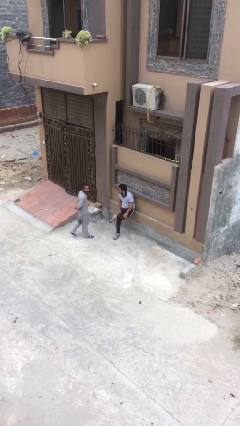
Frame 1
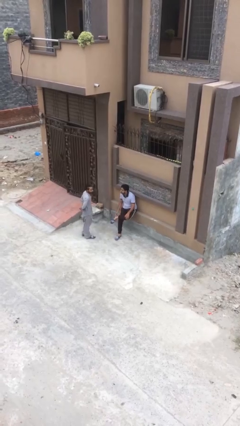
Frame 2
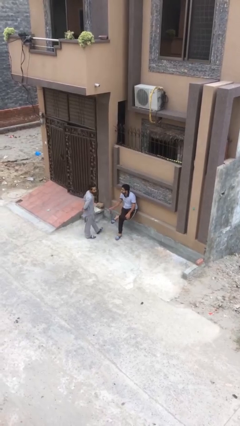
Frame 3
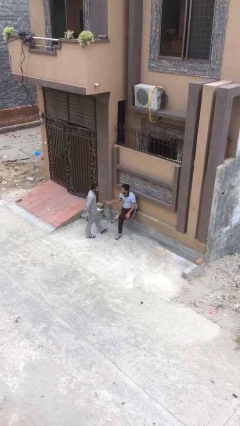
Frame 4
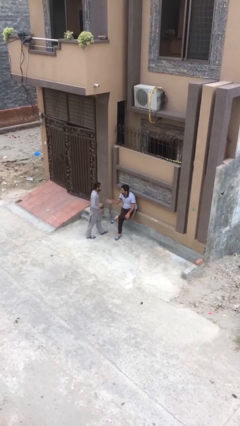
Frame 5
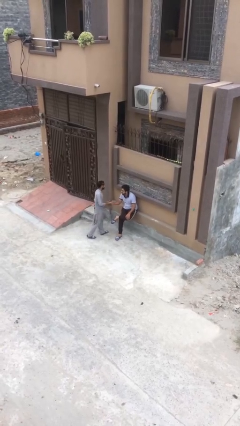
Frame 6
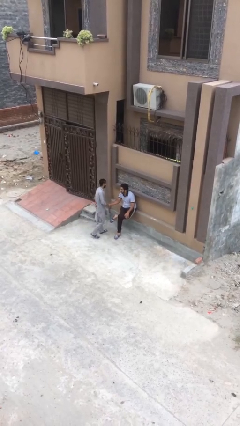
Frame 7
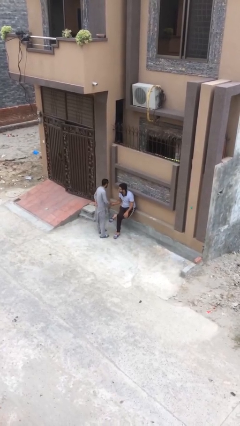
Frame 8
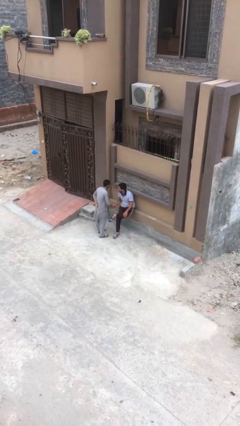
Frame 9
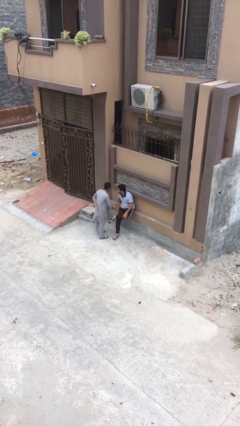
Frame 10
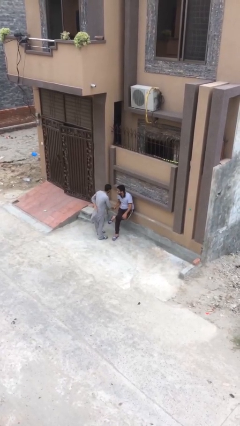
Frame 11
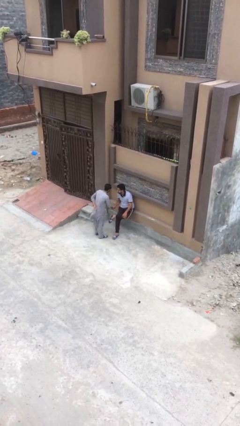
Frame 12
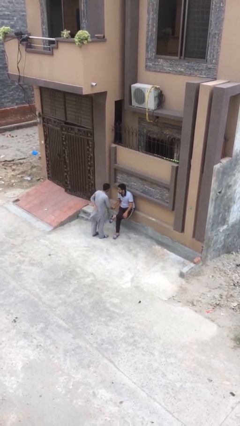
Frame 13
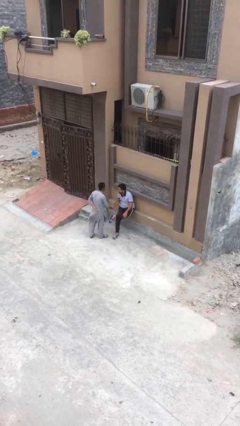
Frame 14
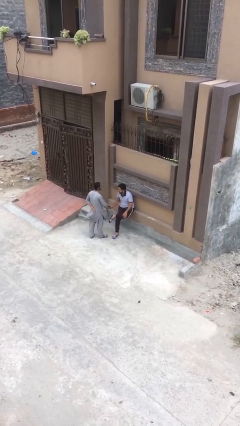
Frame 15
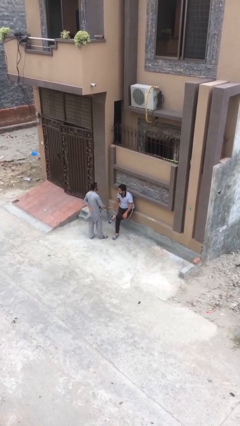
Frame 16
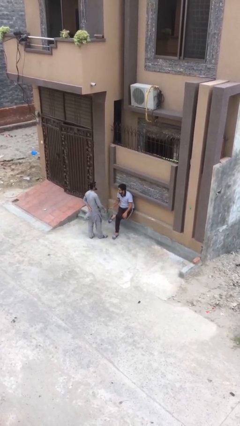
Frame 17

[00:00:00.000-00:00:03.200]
person shakes hand

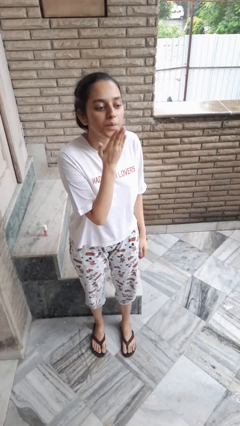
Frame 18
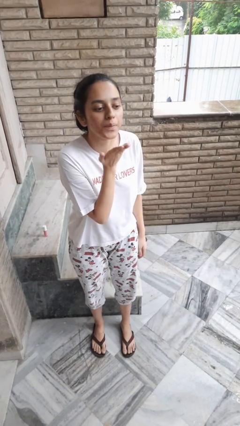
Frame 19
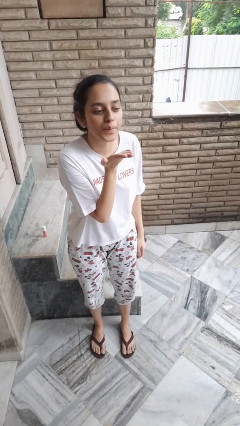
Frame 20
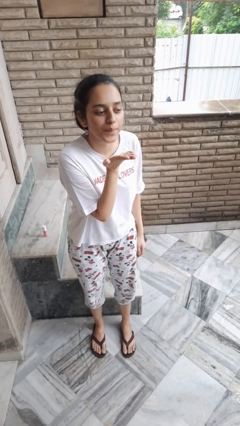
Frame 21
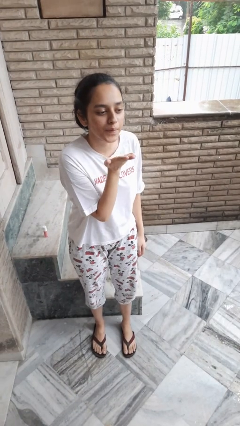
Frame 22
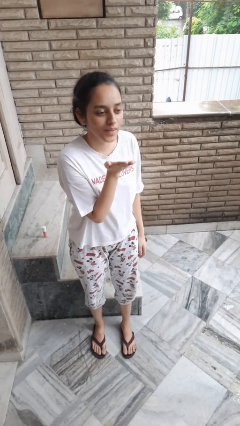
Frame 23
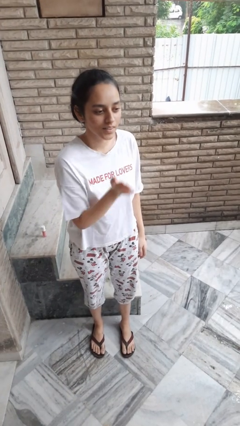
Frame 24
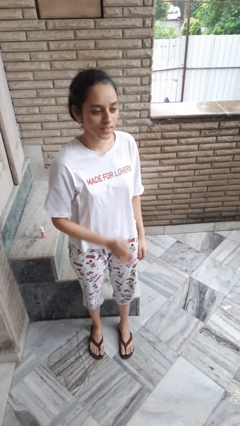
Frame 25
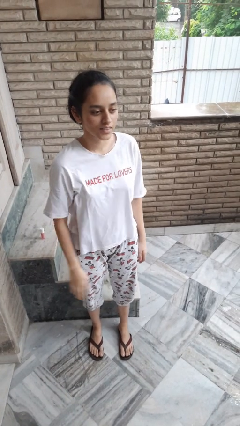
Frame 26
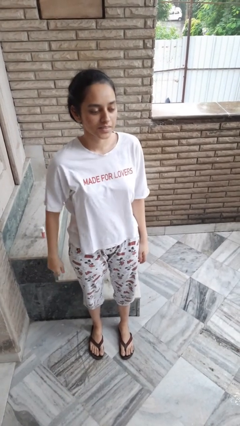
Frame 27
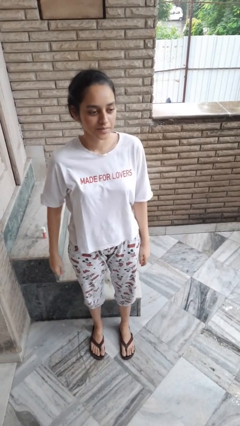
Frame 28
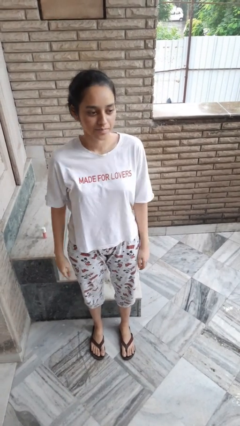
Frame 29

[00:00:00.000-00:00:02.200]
person gestures blow kiss

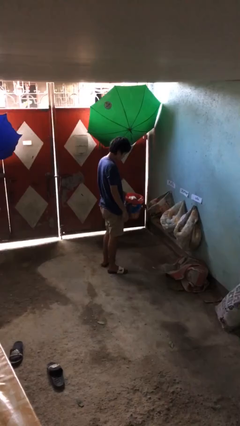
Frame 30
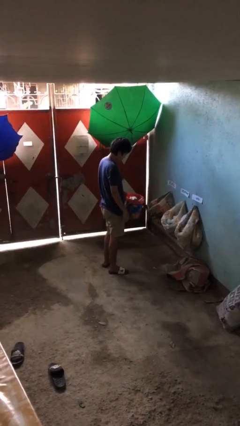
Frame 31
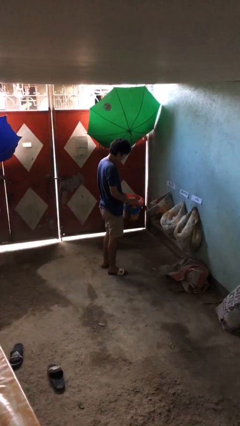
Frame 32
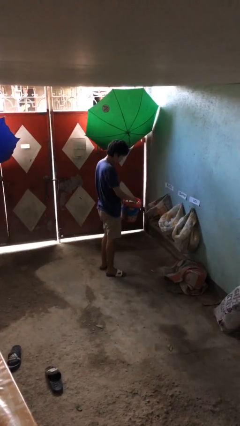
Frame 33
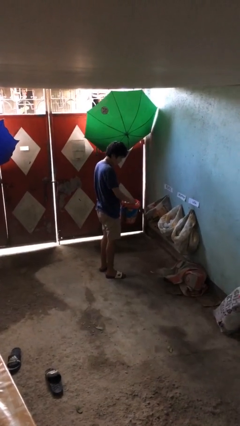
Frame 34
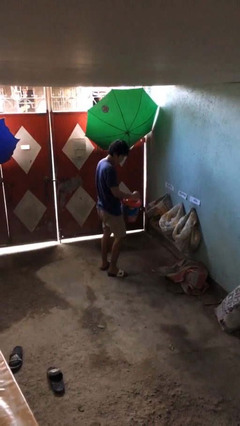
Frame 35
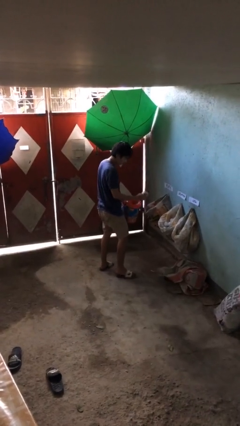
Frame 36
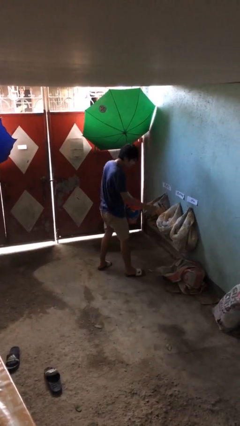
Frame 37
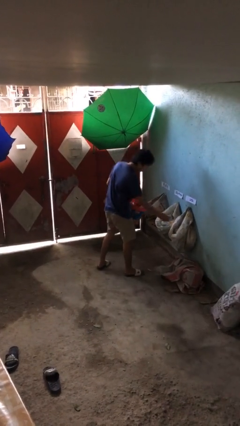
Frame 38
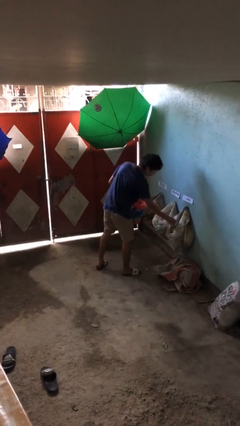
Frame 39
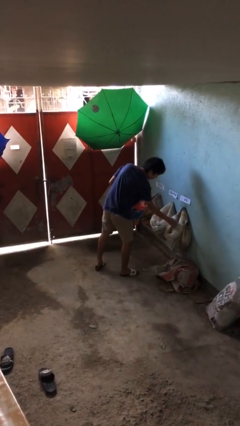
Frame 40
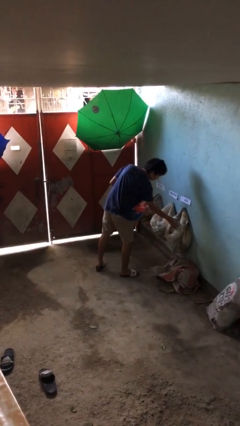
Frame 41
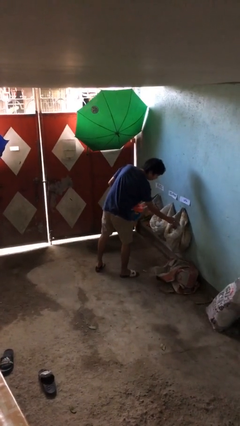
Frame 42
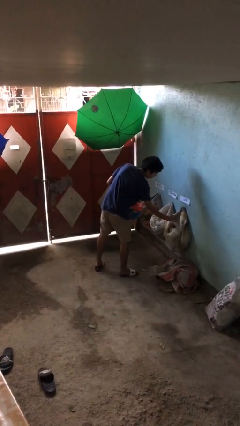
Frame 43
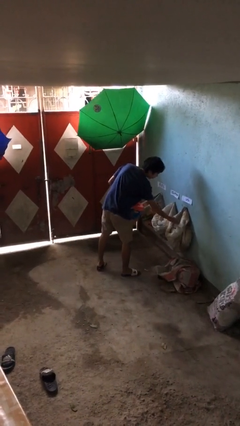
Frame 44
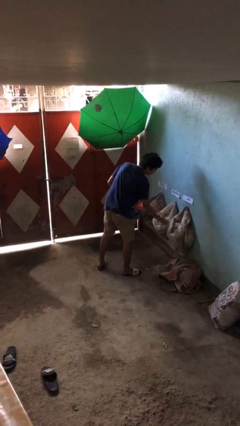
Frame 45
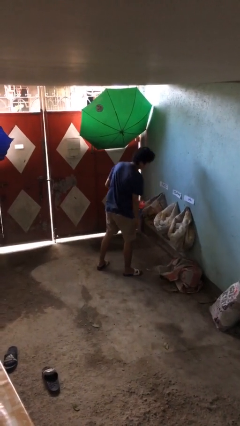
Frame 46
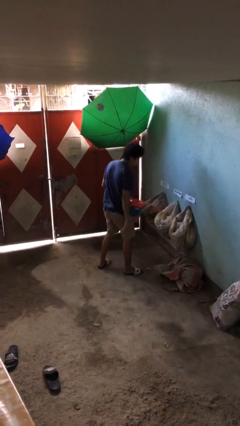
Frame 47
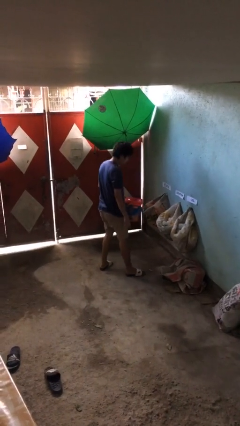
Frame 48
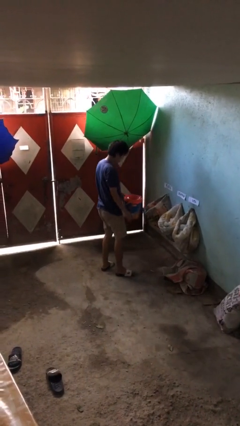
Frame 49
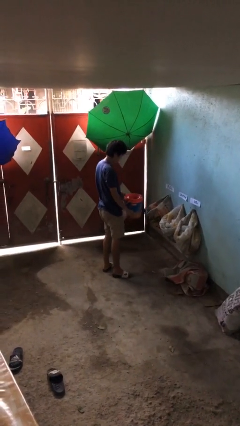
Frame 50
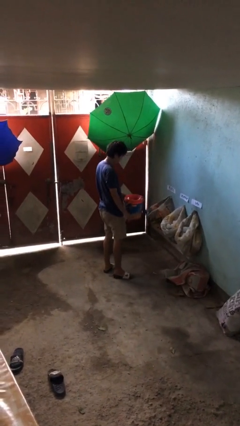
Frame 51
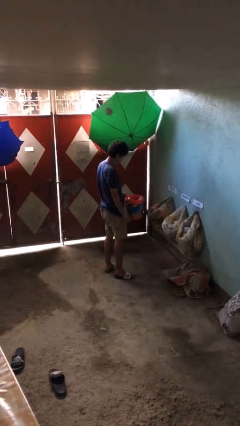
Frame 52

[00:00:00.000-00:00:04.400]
person discards trash

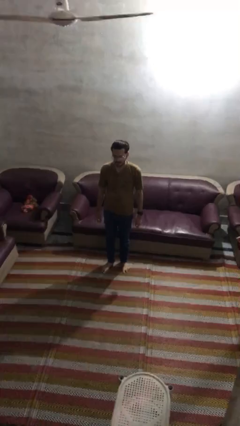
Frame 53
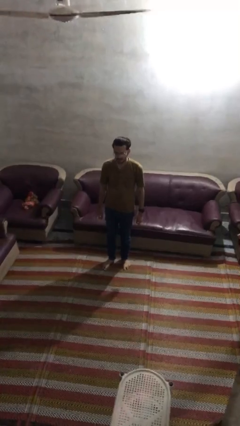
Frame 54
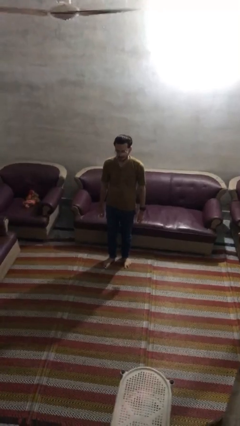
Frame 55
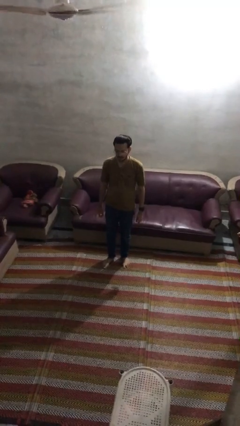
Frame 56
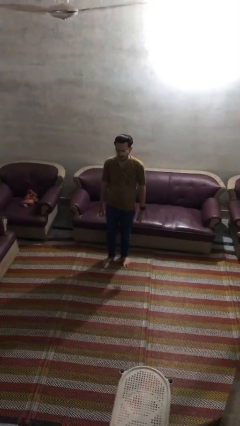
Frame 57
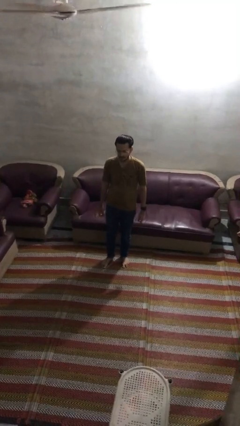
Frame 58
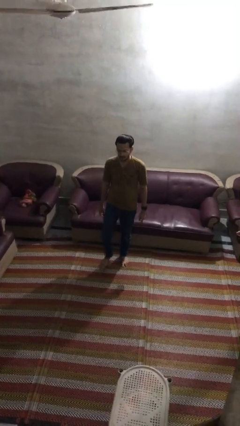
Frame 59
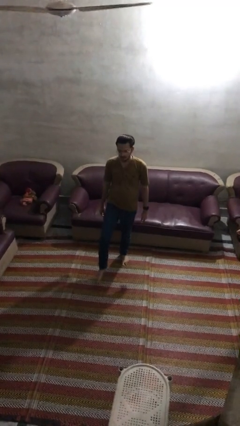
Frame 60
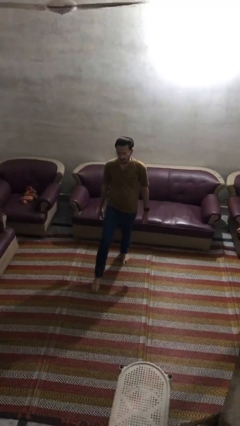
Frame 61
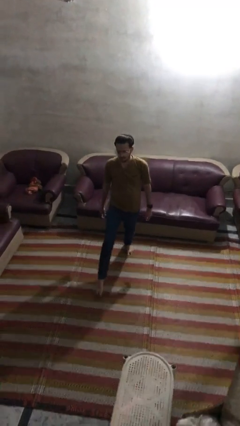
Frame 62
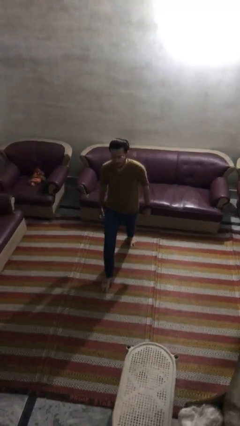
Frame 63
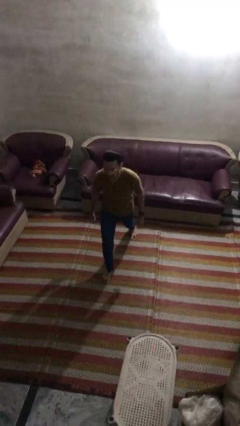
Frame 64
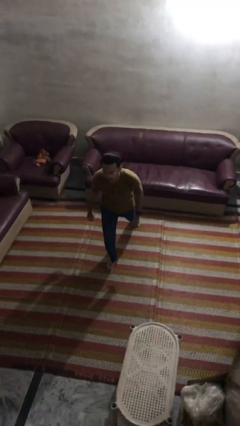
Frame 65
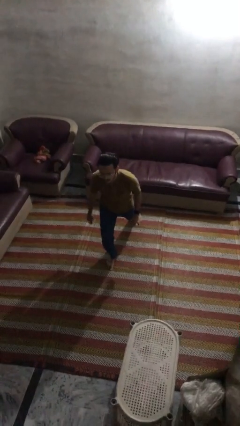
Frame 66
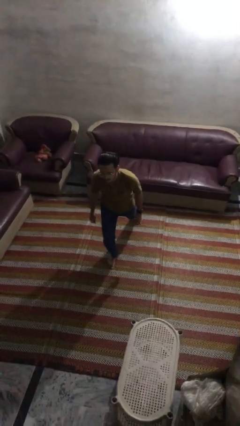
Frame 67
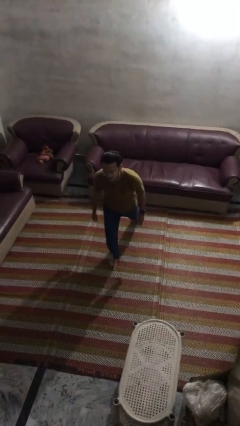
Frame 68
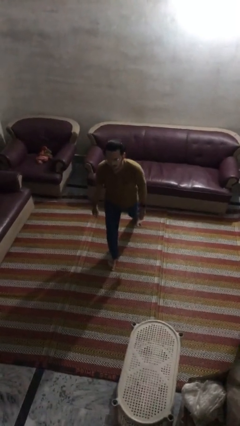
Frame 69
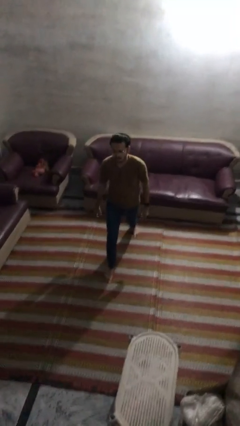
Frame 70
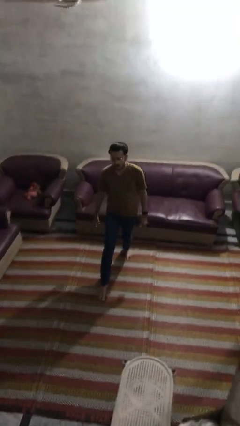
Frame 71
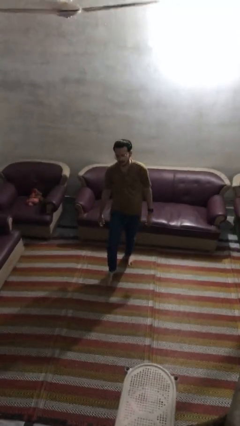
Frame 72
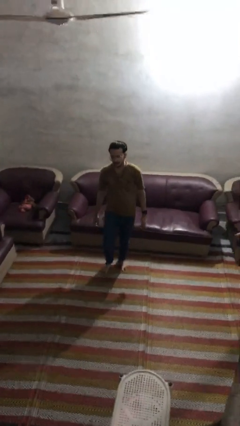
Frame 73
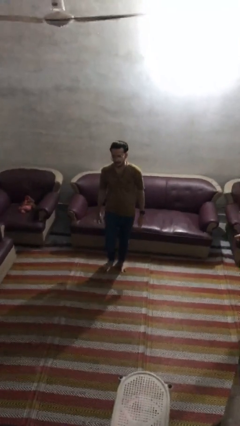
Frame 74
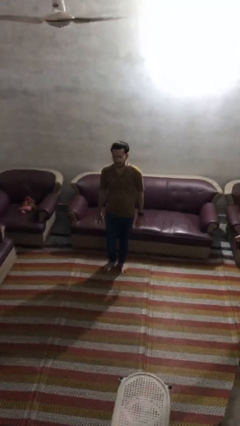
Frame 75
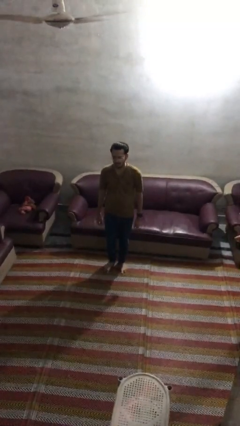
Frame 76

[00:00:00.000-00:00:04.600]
person exercises with lunges

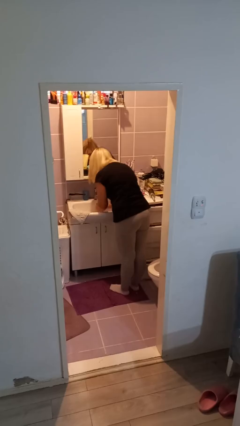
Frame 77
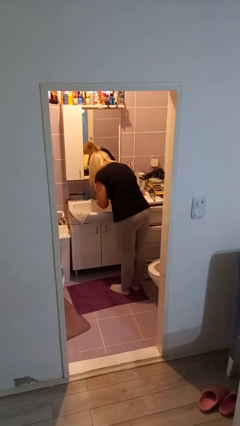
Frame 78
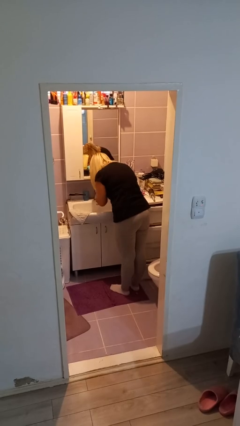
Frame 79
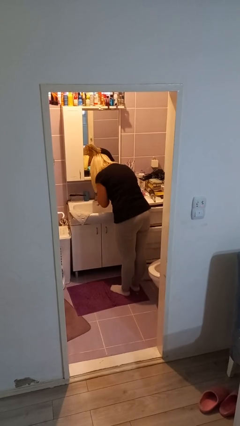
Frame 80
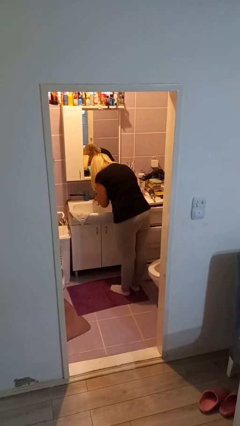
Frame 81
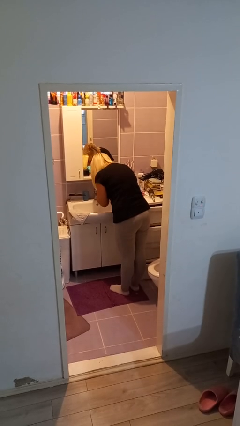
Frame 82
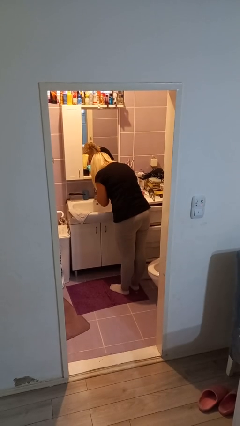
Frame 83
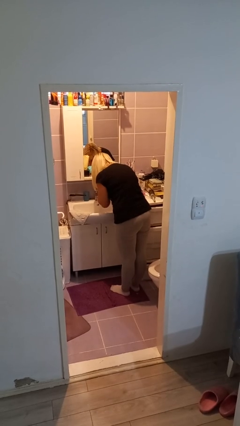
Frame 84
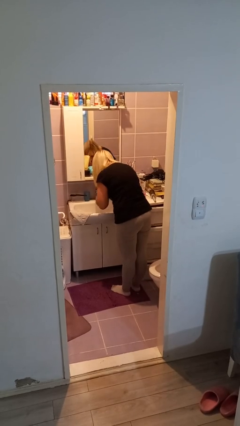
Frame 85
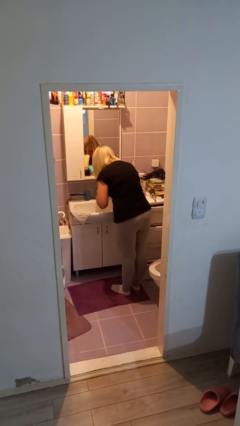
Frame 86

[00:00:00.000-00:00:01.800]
person washes face

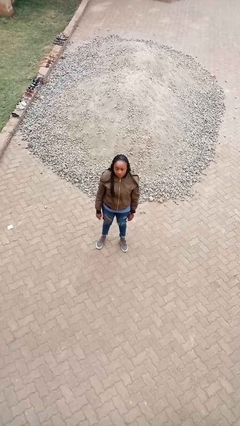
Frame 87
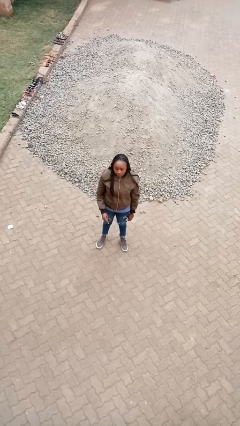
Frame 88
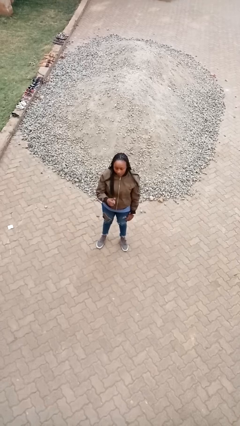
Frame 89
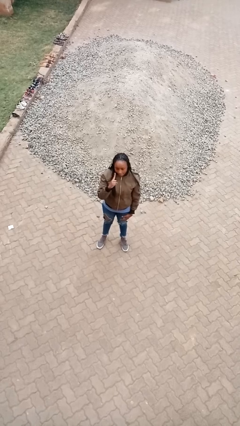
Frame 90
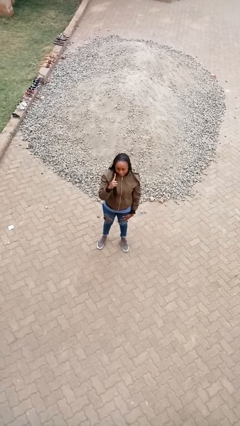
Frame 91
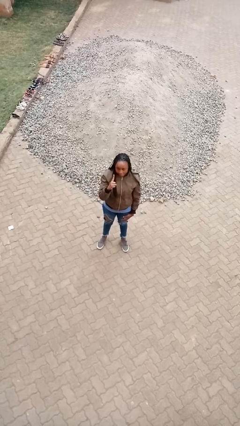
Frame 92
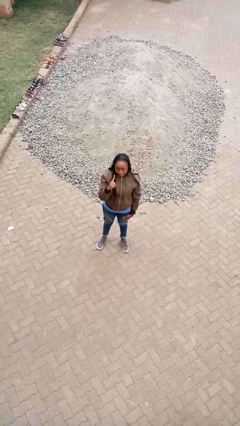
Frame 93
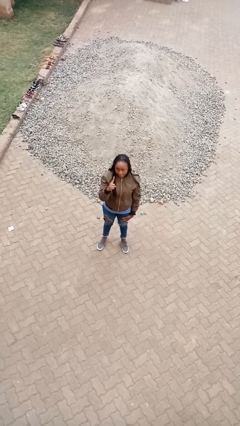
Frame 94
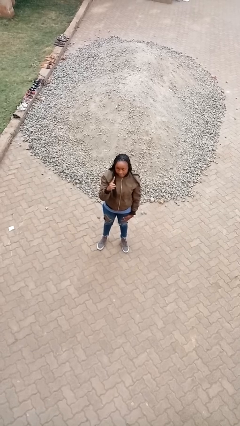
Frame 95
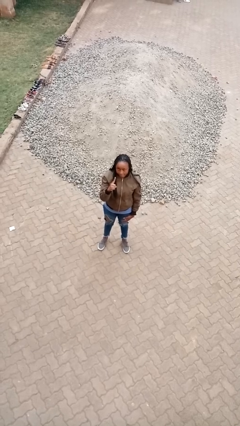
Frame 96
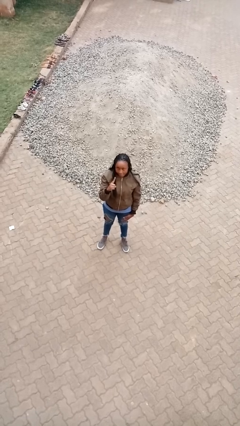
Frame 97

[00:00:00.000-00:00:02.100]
person gestures number one
